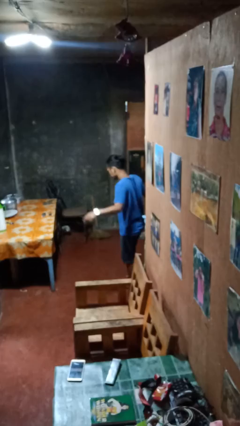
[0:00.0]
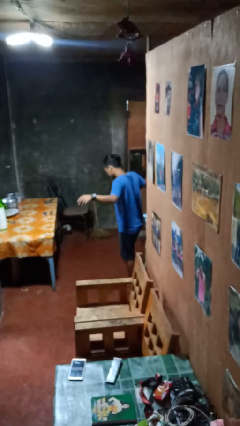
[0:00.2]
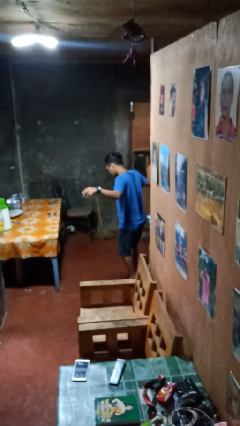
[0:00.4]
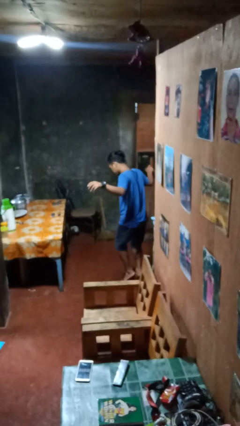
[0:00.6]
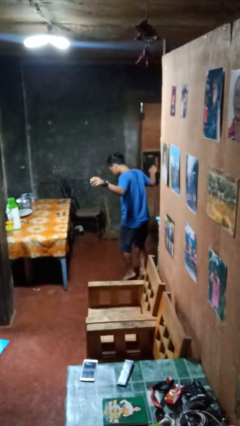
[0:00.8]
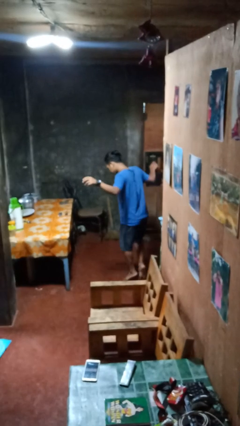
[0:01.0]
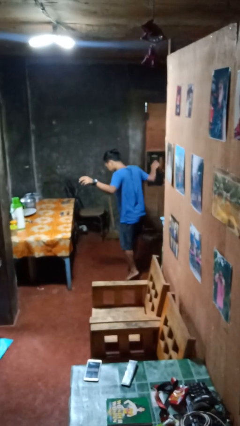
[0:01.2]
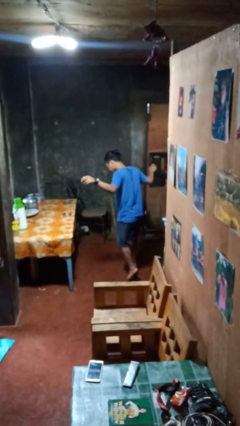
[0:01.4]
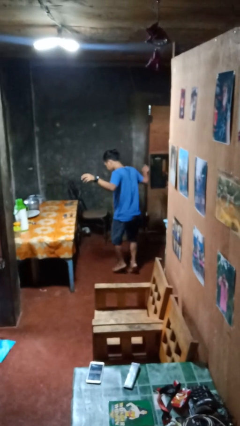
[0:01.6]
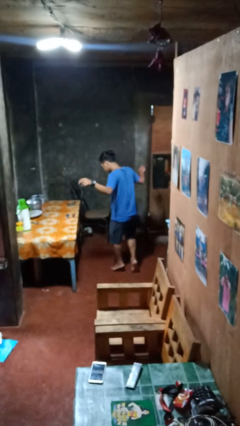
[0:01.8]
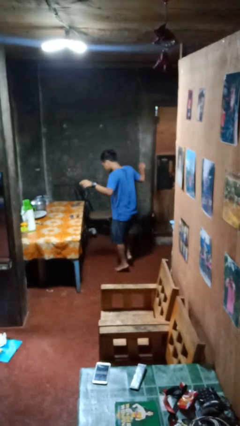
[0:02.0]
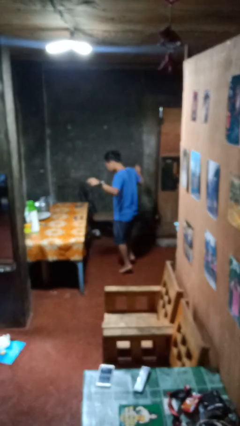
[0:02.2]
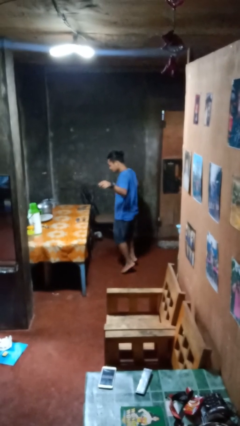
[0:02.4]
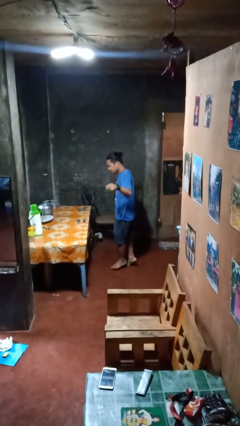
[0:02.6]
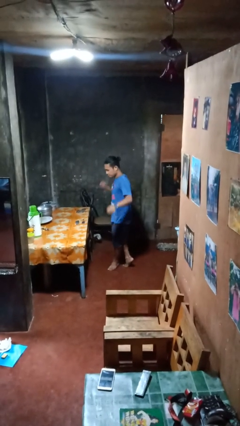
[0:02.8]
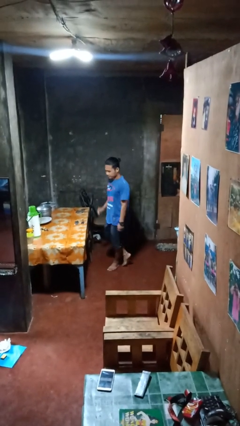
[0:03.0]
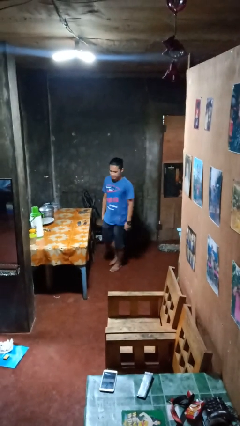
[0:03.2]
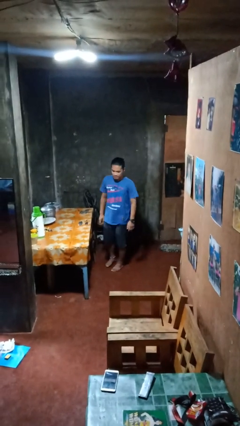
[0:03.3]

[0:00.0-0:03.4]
person walks tiptoe

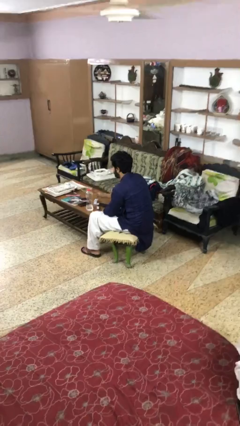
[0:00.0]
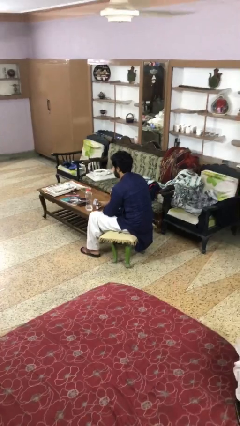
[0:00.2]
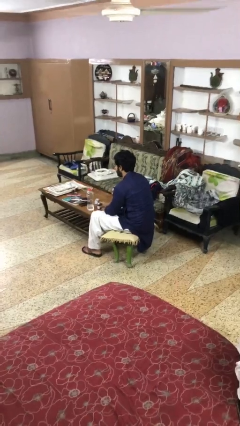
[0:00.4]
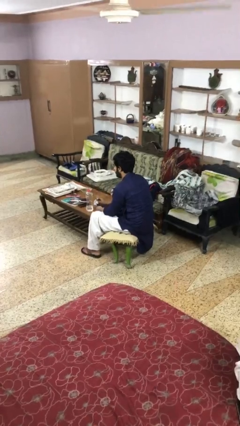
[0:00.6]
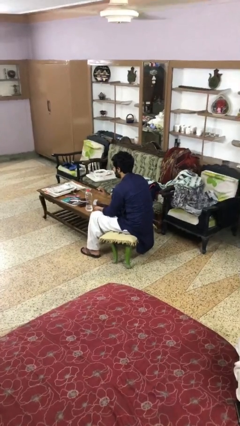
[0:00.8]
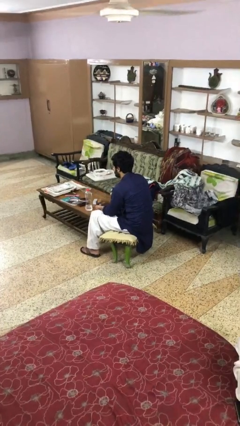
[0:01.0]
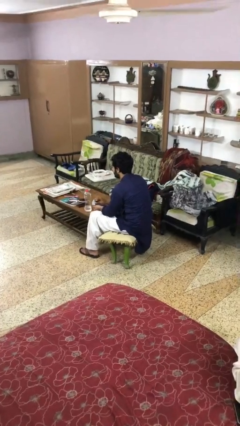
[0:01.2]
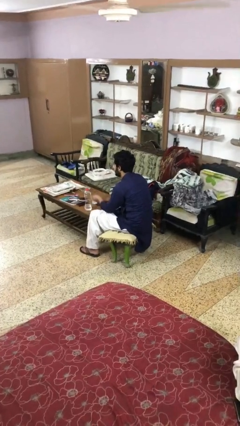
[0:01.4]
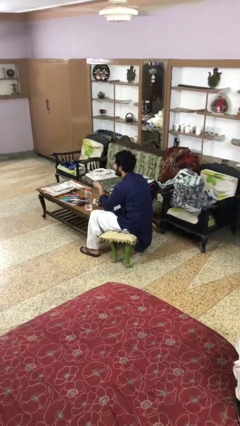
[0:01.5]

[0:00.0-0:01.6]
person takes medicine pills

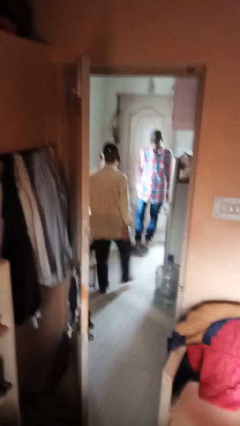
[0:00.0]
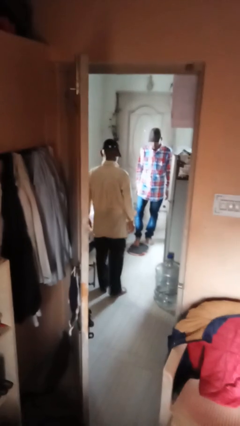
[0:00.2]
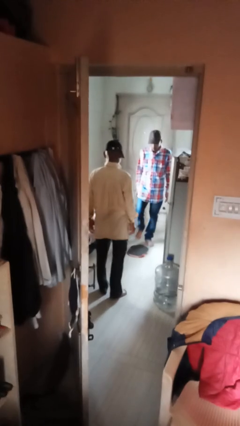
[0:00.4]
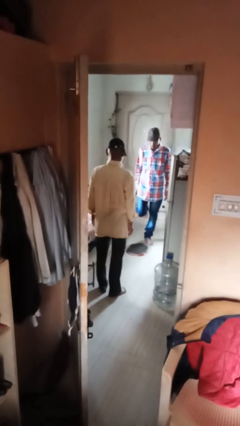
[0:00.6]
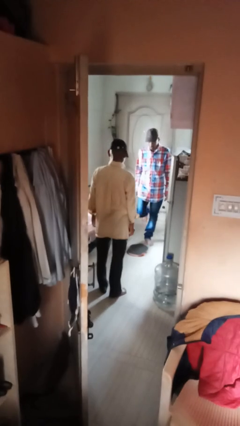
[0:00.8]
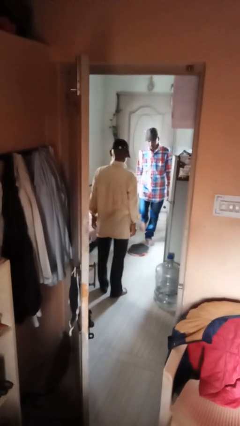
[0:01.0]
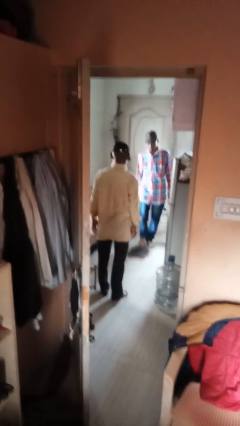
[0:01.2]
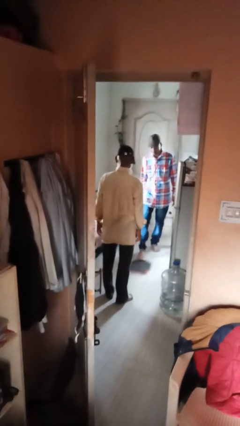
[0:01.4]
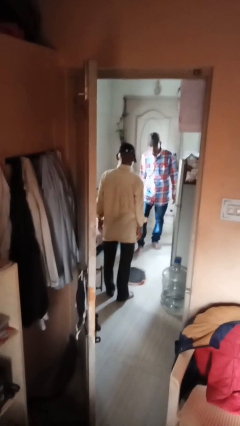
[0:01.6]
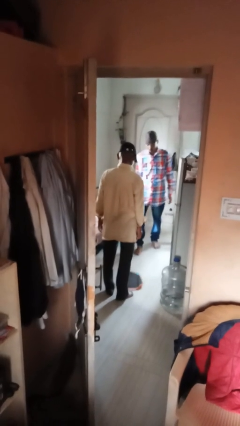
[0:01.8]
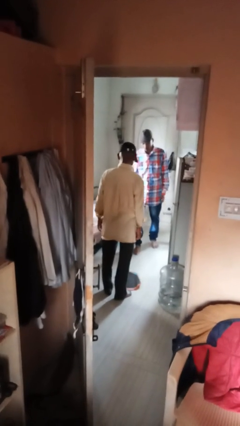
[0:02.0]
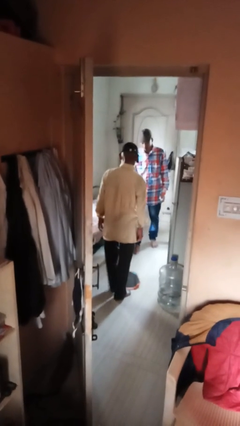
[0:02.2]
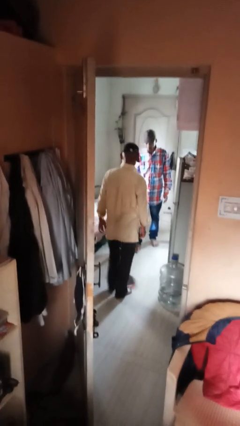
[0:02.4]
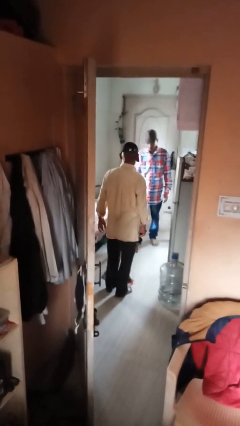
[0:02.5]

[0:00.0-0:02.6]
person kicks object to person

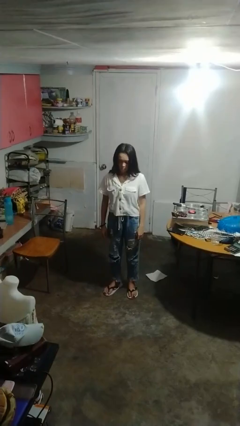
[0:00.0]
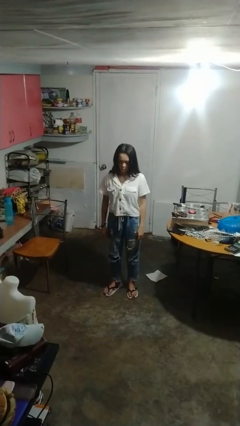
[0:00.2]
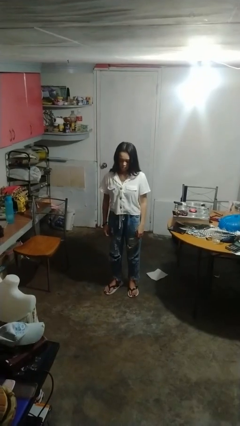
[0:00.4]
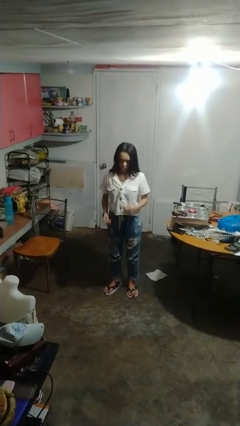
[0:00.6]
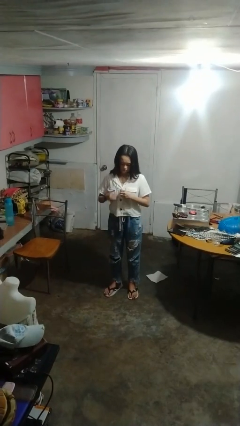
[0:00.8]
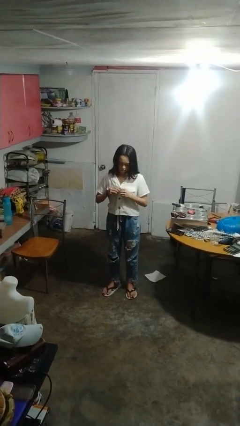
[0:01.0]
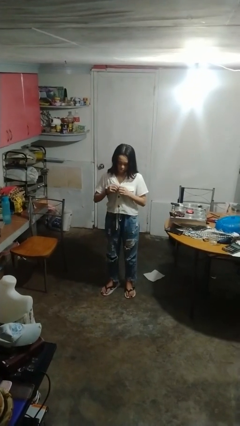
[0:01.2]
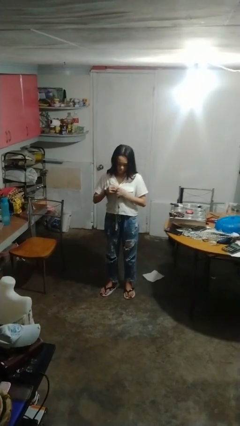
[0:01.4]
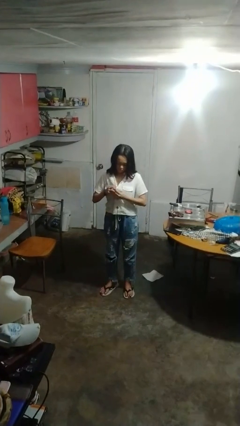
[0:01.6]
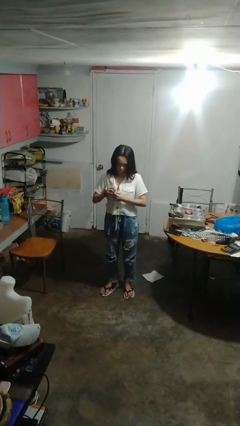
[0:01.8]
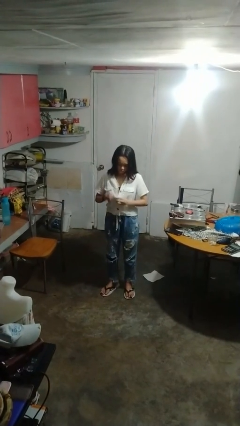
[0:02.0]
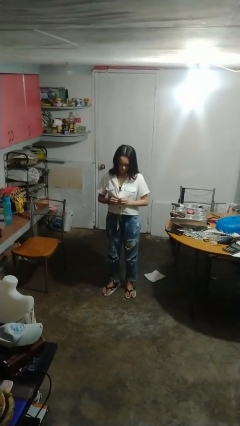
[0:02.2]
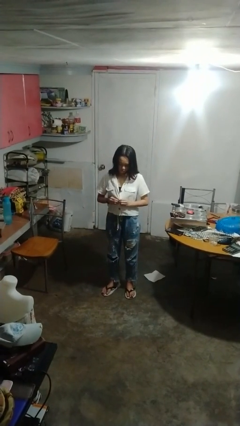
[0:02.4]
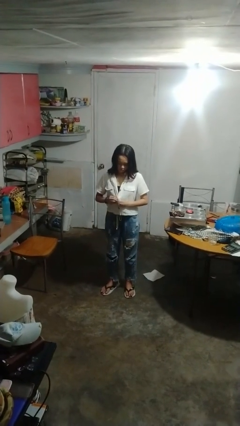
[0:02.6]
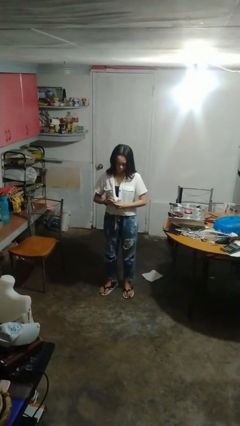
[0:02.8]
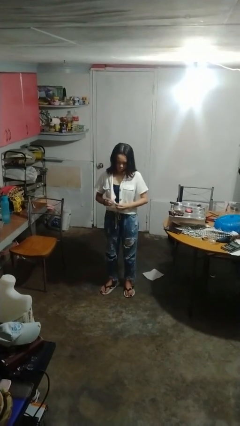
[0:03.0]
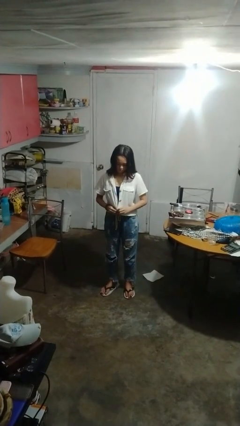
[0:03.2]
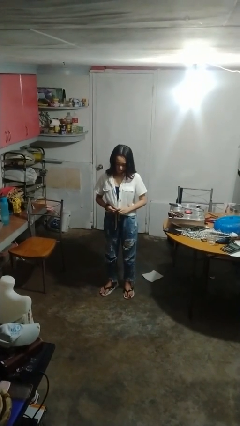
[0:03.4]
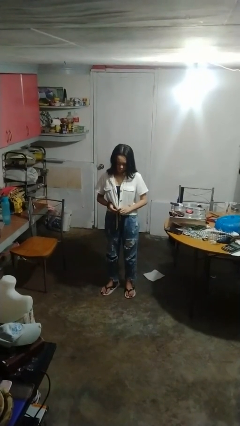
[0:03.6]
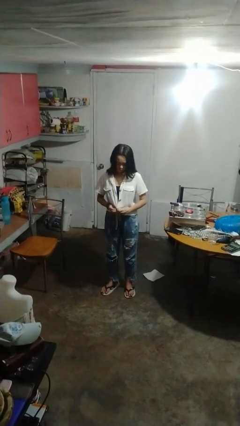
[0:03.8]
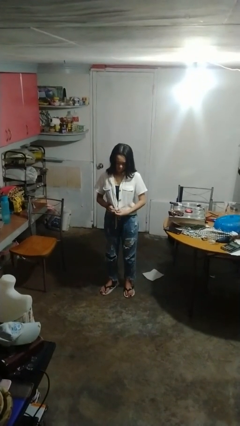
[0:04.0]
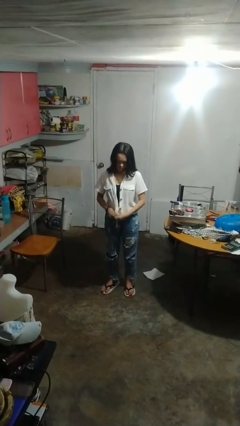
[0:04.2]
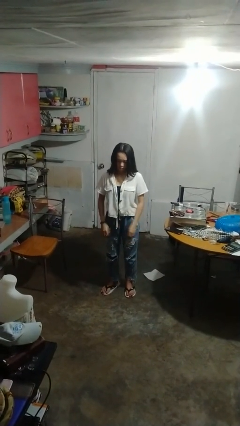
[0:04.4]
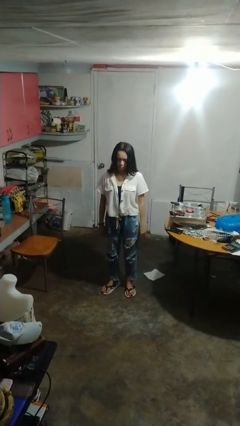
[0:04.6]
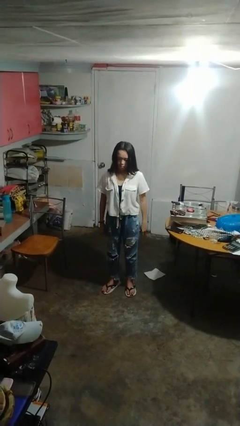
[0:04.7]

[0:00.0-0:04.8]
person unbuttons shirt

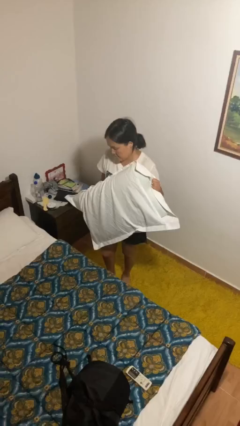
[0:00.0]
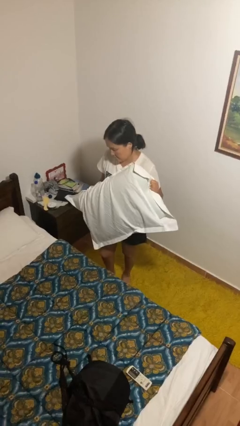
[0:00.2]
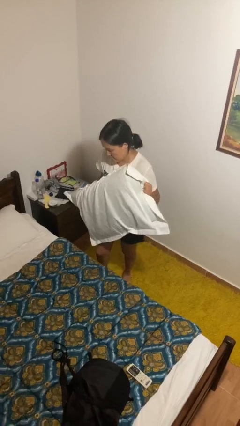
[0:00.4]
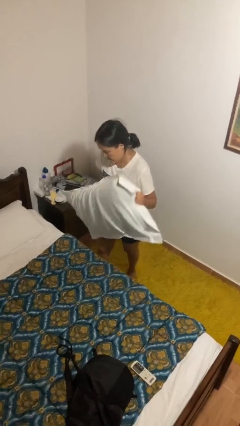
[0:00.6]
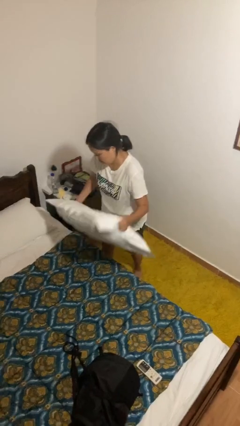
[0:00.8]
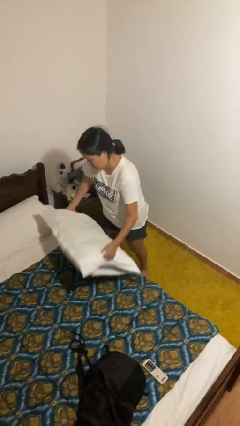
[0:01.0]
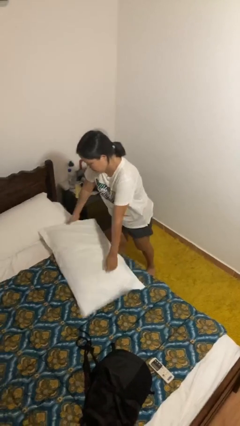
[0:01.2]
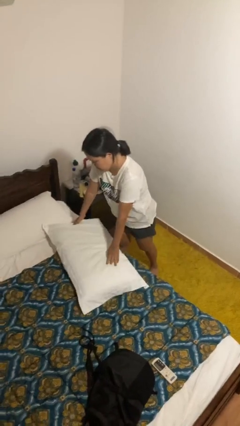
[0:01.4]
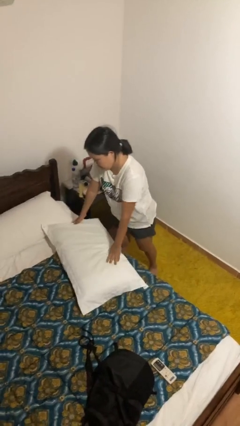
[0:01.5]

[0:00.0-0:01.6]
person puts down object on bed

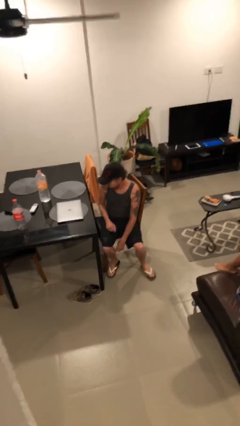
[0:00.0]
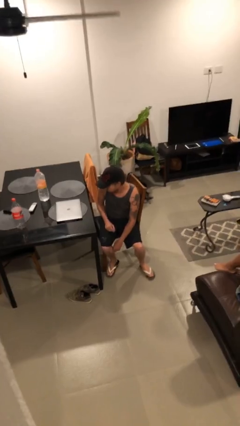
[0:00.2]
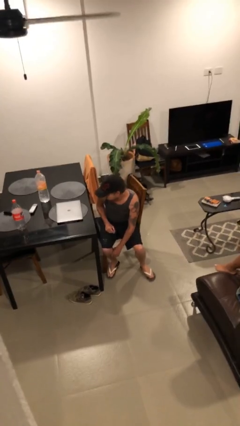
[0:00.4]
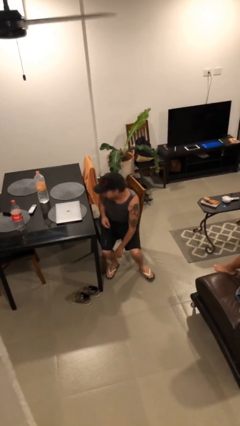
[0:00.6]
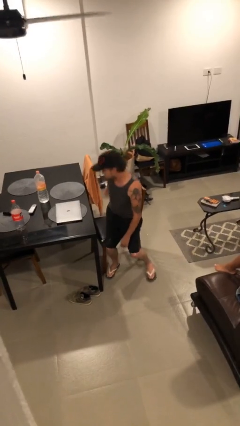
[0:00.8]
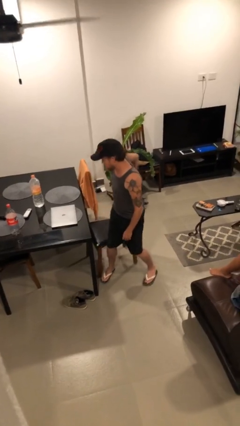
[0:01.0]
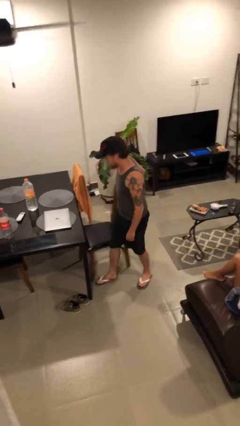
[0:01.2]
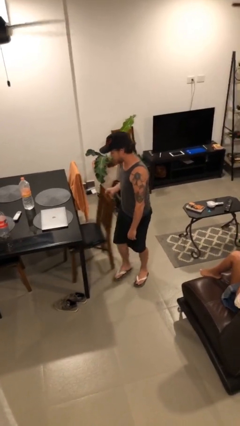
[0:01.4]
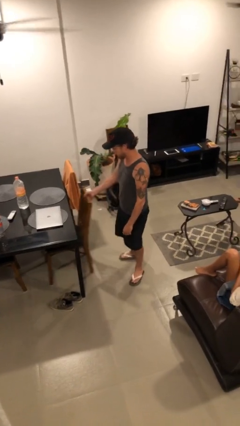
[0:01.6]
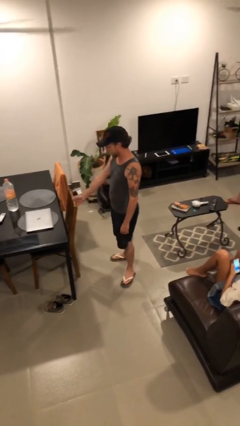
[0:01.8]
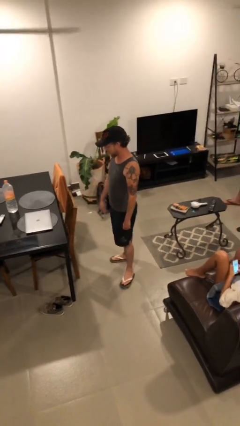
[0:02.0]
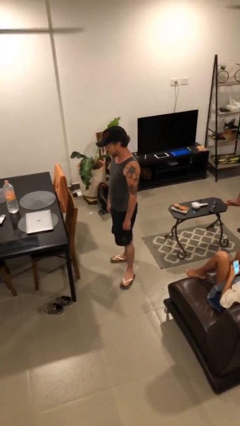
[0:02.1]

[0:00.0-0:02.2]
person stands up

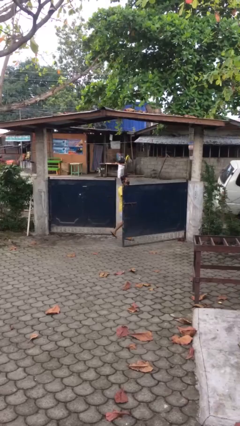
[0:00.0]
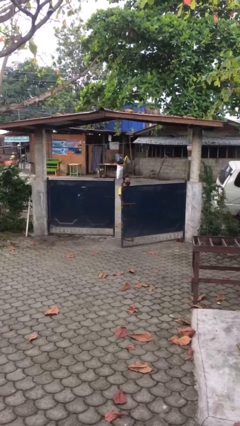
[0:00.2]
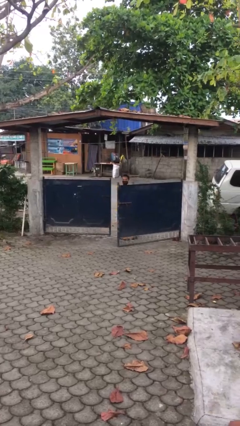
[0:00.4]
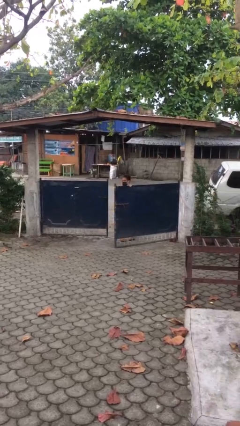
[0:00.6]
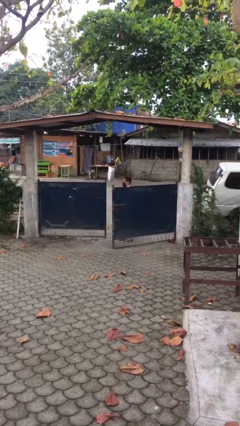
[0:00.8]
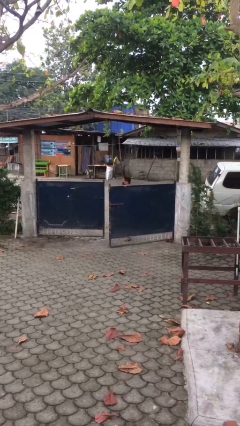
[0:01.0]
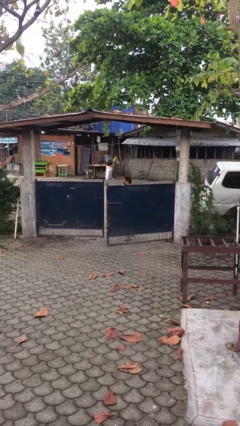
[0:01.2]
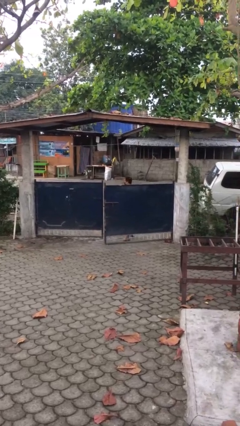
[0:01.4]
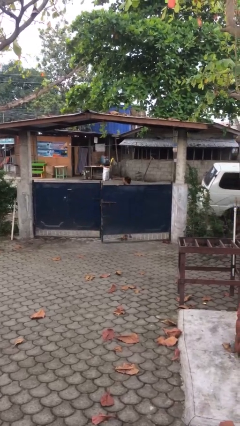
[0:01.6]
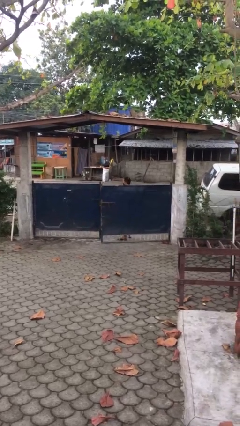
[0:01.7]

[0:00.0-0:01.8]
person exits scene through structure
